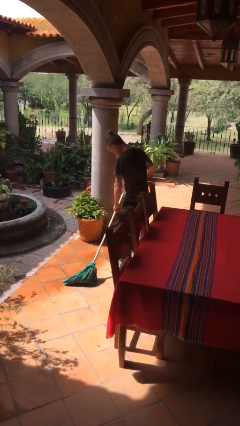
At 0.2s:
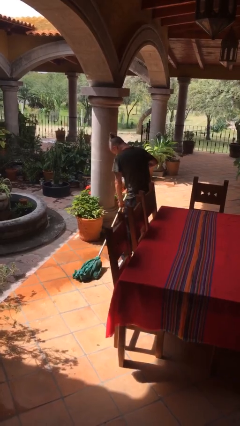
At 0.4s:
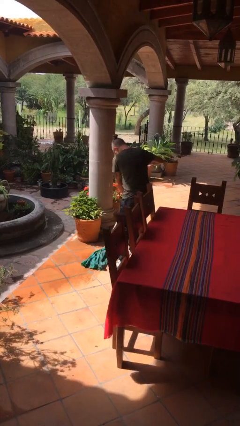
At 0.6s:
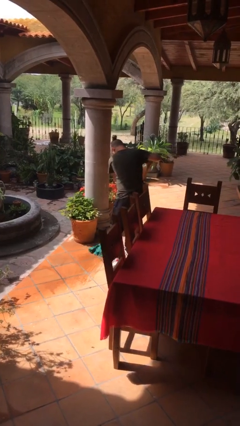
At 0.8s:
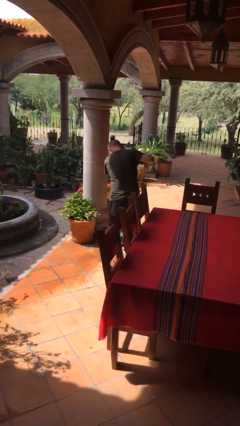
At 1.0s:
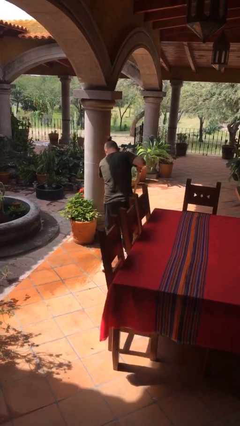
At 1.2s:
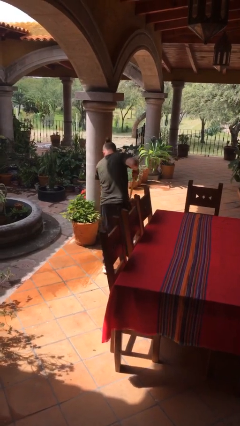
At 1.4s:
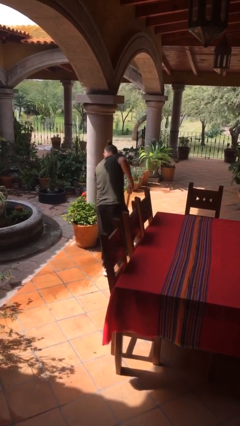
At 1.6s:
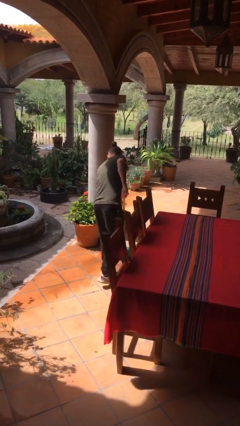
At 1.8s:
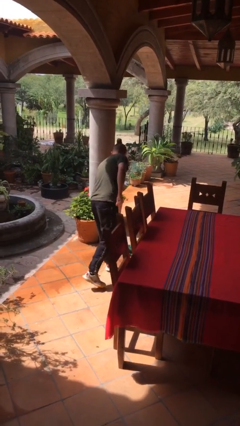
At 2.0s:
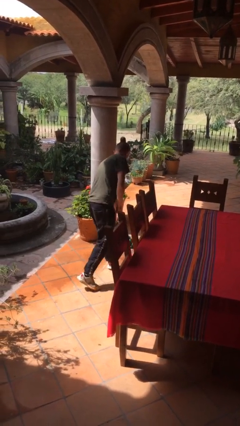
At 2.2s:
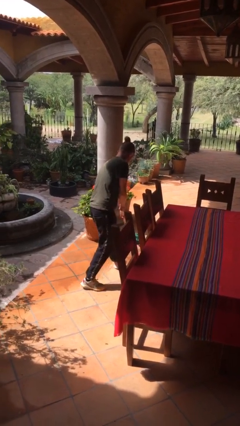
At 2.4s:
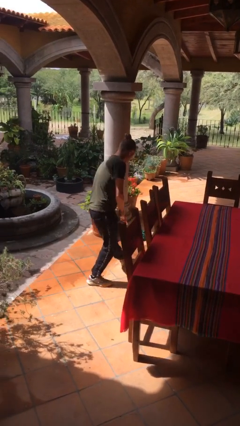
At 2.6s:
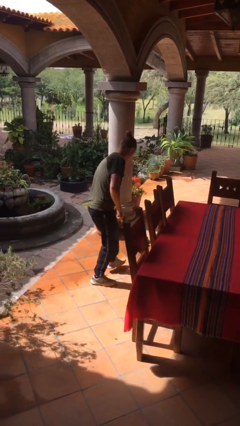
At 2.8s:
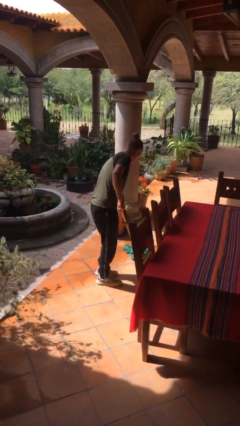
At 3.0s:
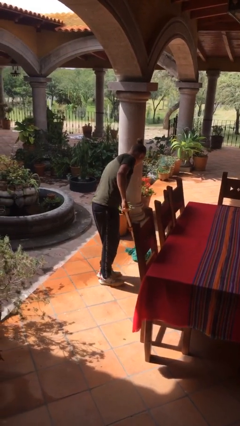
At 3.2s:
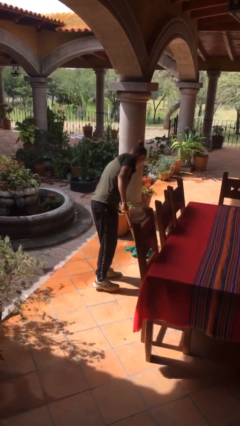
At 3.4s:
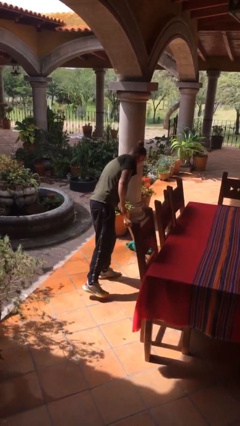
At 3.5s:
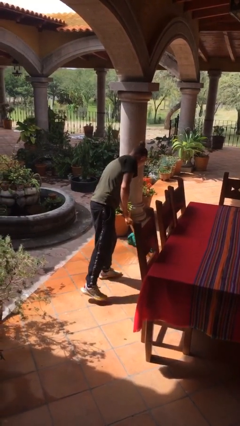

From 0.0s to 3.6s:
person mops

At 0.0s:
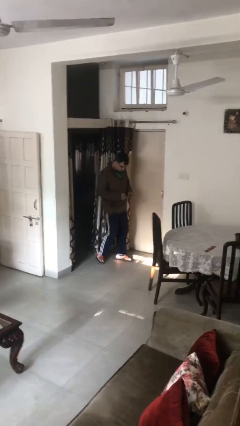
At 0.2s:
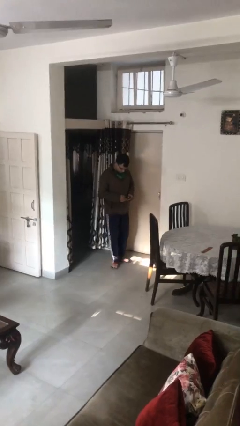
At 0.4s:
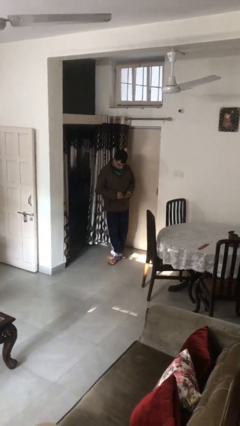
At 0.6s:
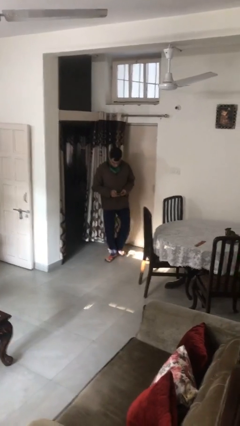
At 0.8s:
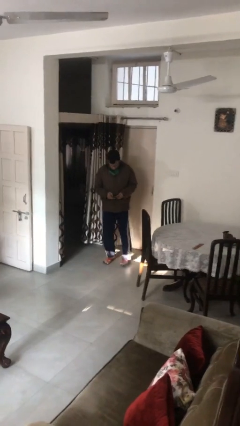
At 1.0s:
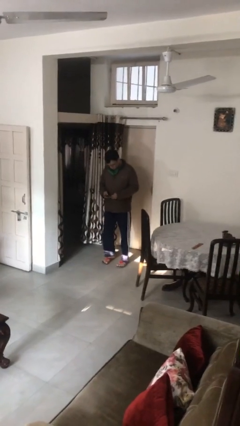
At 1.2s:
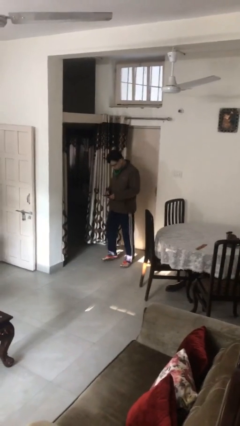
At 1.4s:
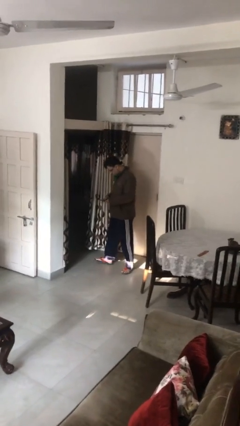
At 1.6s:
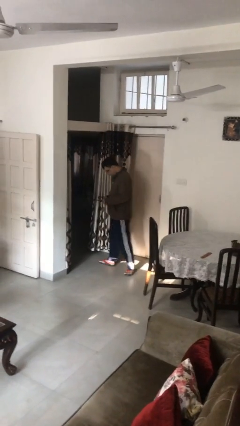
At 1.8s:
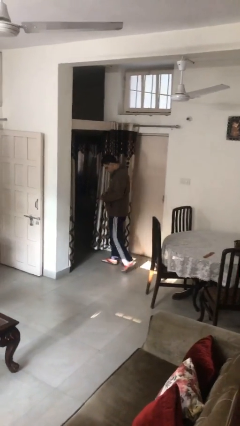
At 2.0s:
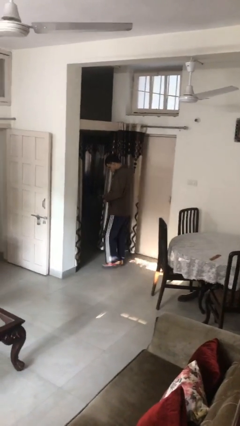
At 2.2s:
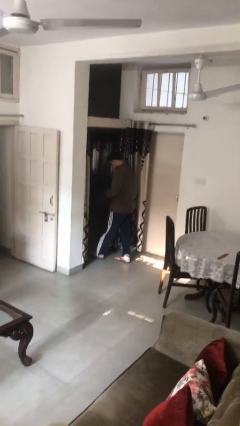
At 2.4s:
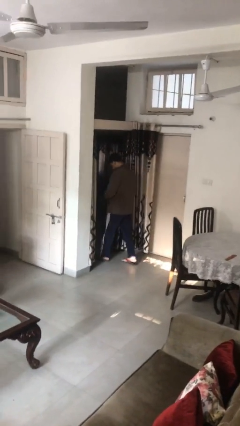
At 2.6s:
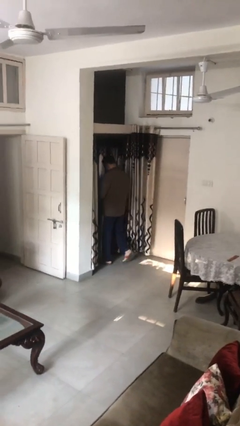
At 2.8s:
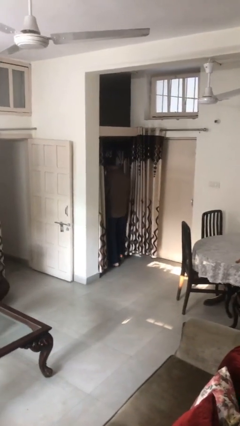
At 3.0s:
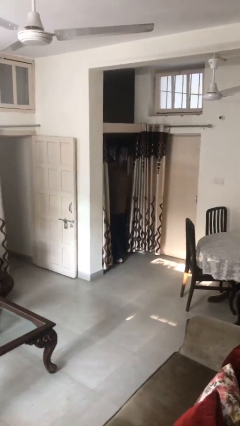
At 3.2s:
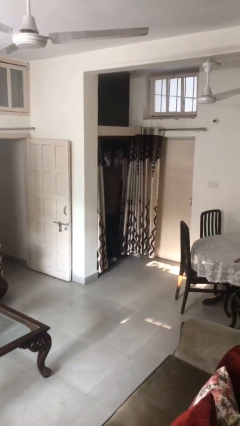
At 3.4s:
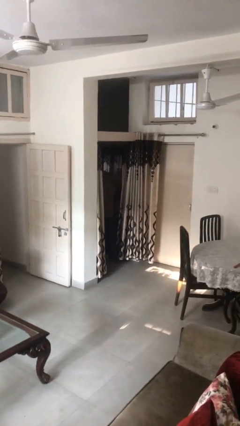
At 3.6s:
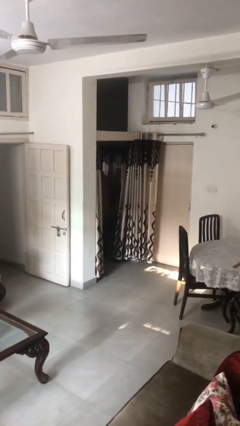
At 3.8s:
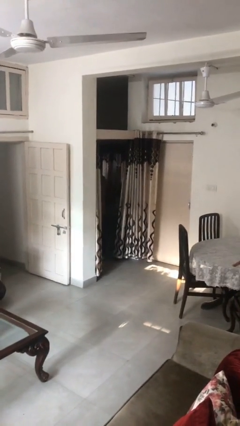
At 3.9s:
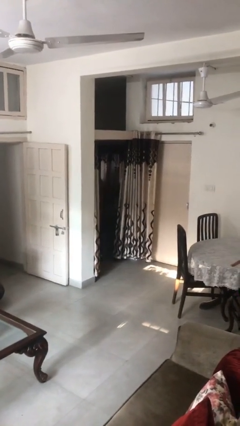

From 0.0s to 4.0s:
person exits scene through structure

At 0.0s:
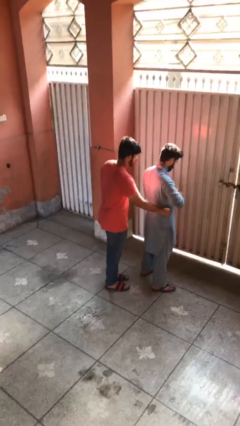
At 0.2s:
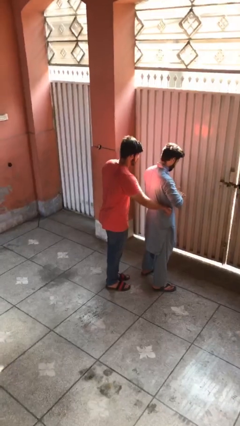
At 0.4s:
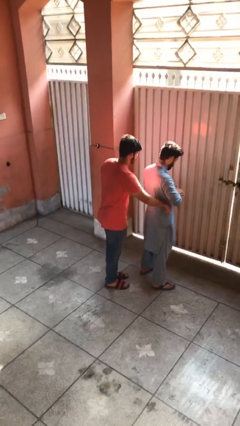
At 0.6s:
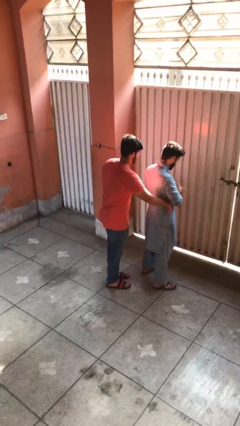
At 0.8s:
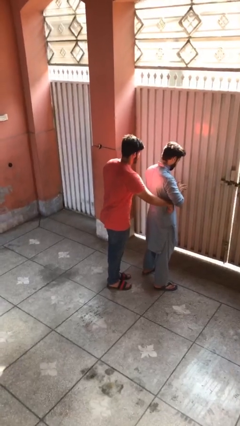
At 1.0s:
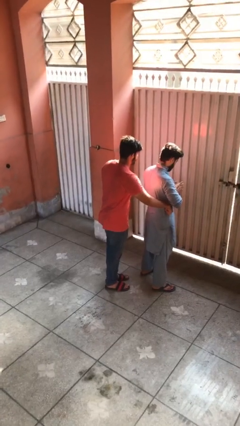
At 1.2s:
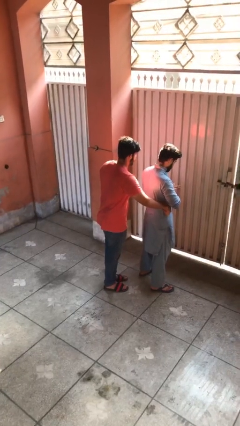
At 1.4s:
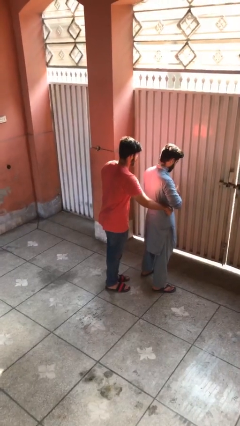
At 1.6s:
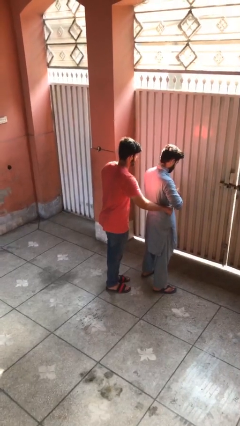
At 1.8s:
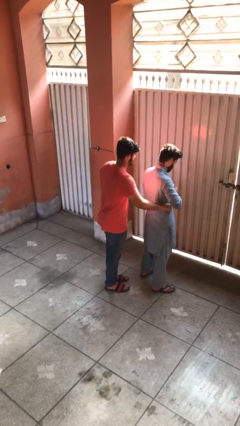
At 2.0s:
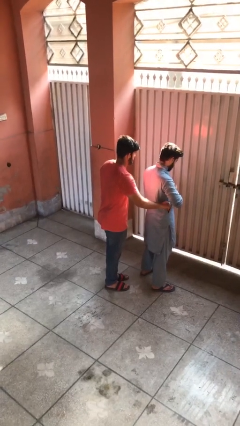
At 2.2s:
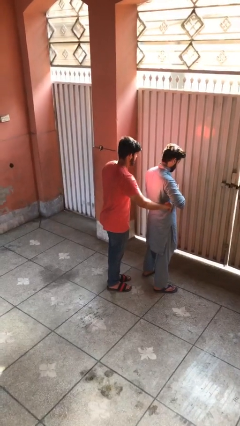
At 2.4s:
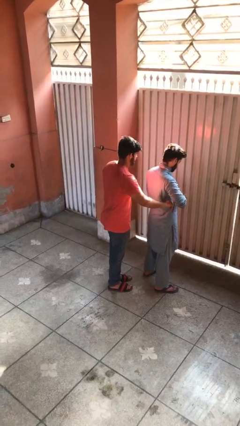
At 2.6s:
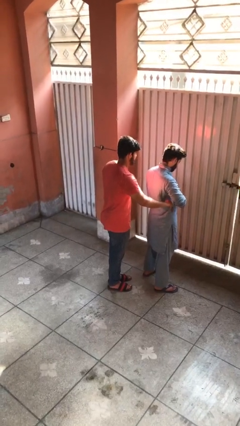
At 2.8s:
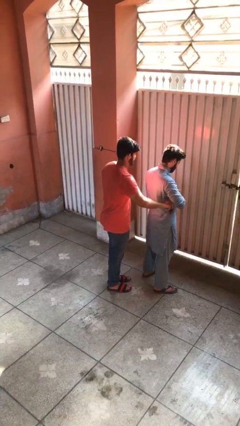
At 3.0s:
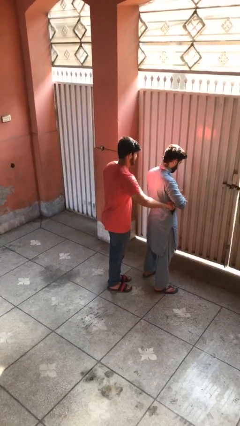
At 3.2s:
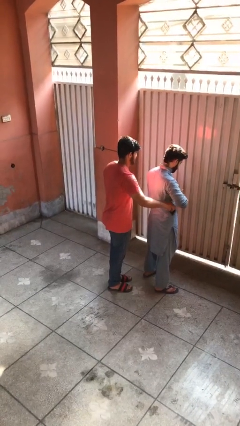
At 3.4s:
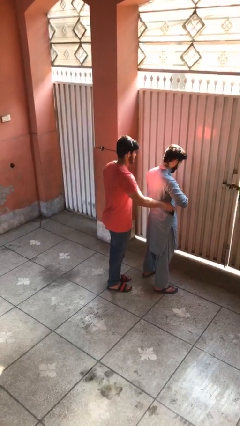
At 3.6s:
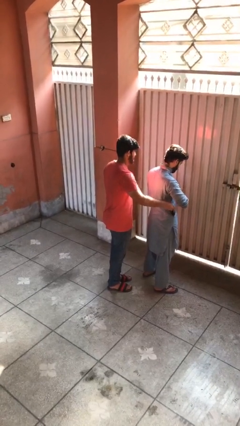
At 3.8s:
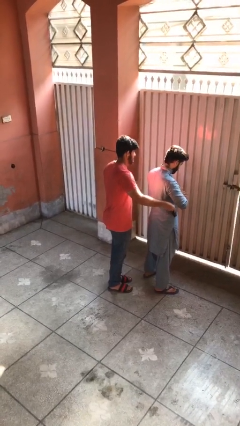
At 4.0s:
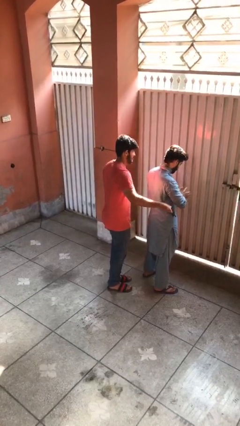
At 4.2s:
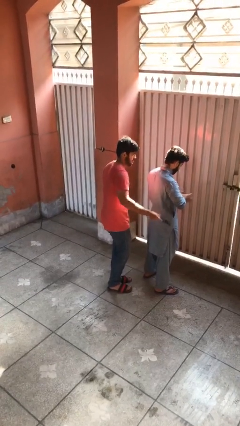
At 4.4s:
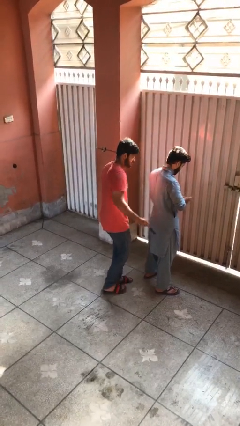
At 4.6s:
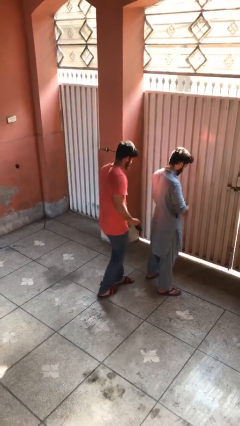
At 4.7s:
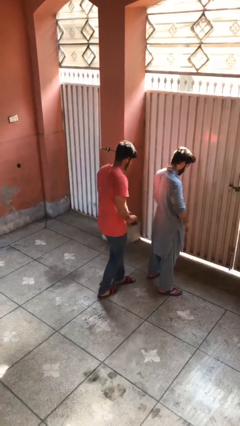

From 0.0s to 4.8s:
person steals object from person

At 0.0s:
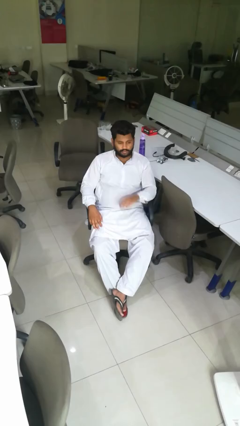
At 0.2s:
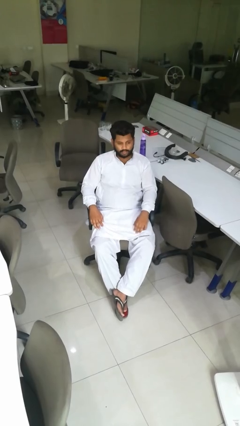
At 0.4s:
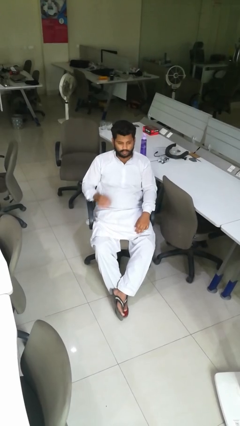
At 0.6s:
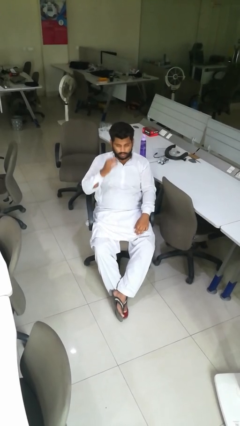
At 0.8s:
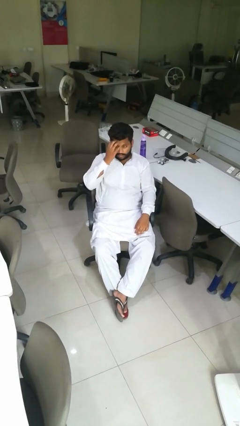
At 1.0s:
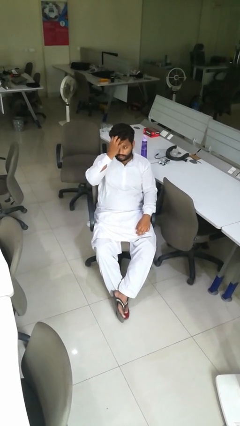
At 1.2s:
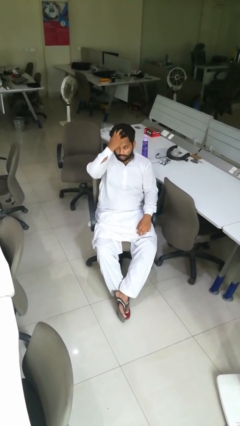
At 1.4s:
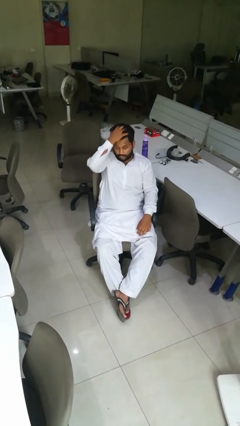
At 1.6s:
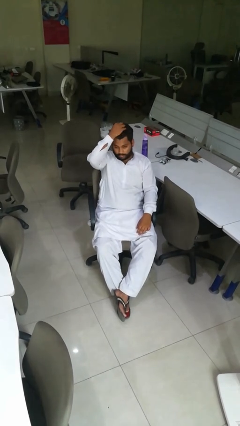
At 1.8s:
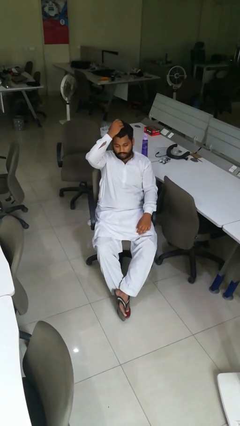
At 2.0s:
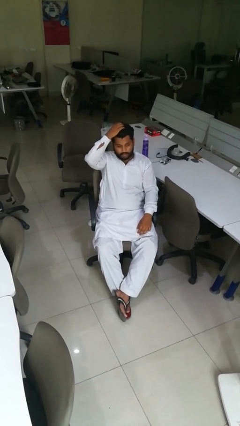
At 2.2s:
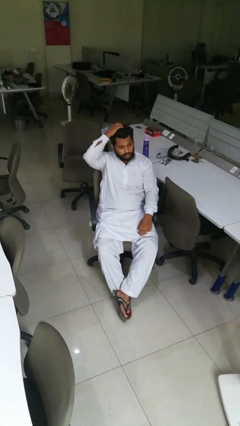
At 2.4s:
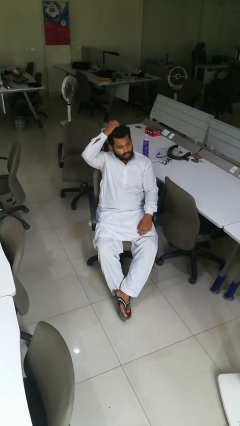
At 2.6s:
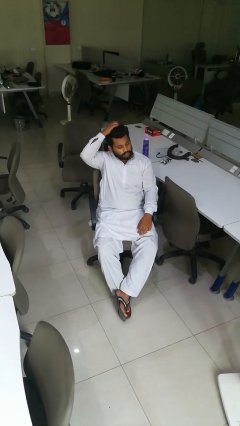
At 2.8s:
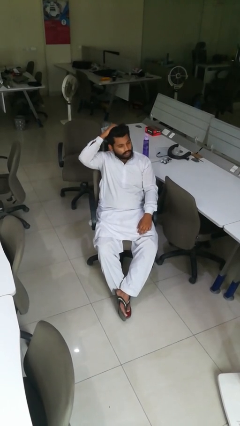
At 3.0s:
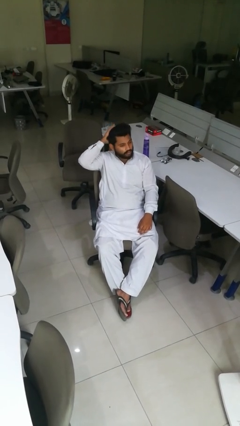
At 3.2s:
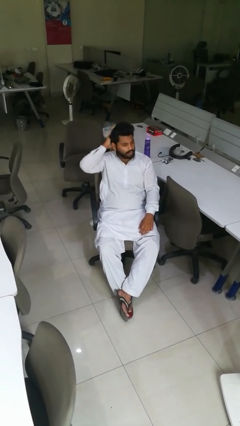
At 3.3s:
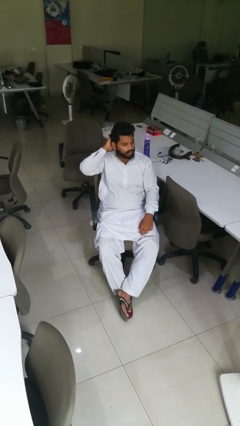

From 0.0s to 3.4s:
person strokes hair

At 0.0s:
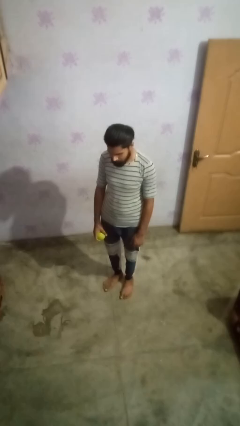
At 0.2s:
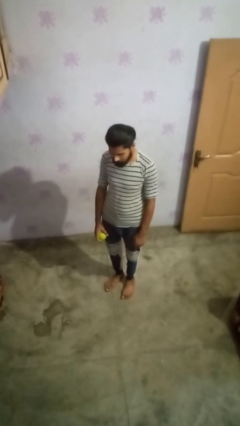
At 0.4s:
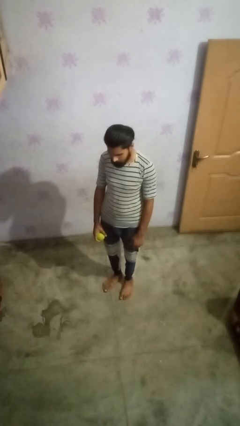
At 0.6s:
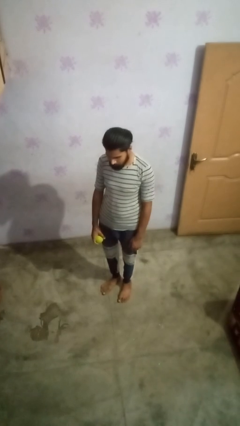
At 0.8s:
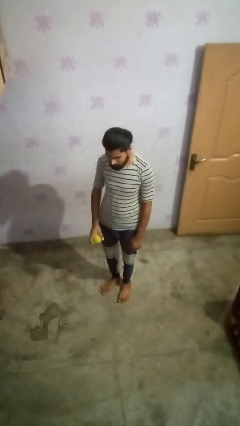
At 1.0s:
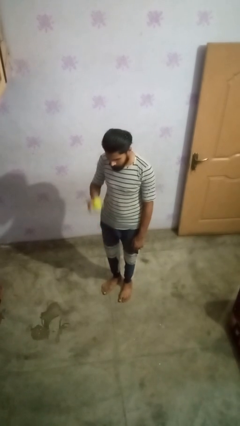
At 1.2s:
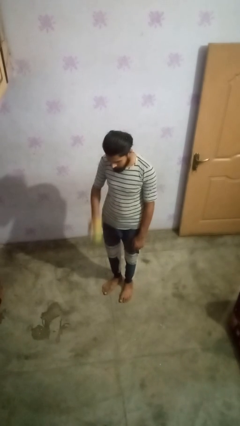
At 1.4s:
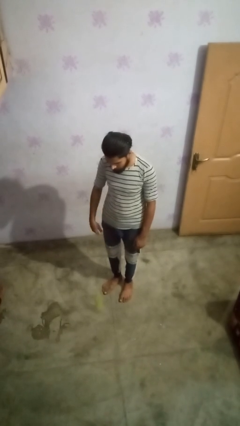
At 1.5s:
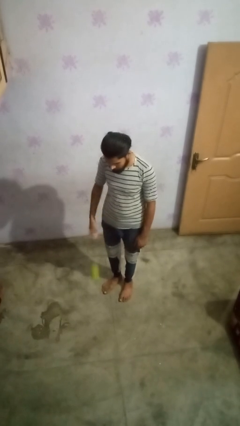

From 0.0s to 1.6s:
person bounces ball on floor
